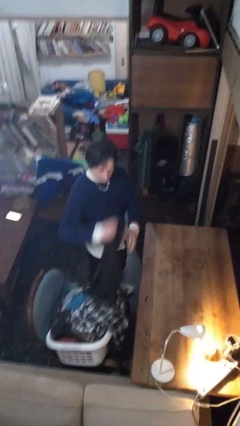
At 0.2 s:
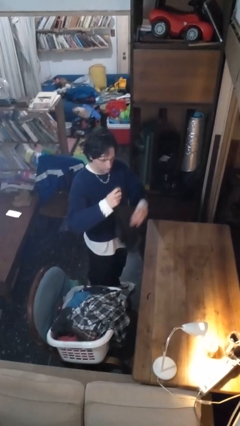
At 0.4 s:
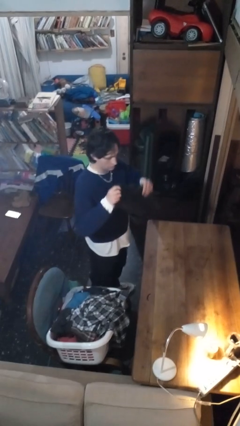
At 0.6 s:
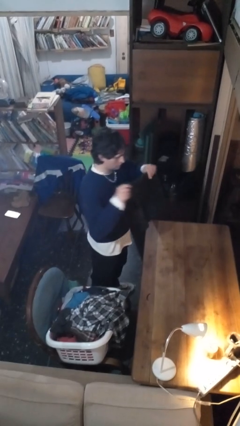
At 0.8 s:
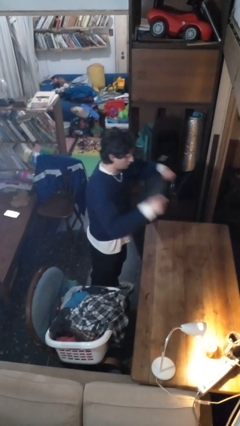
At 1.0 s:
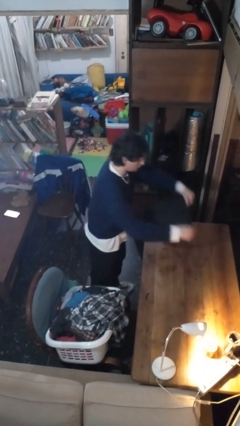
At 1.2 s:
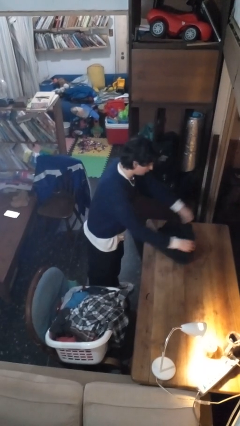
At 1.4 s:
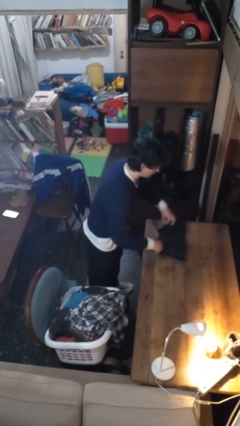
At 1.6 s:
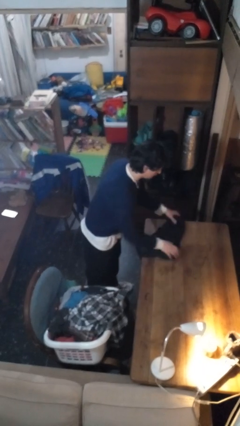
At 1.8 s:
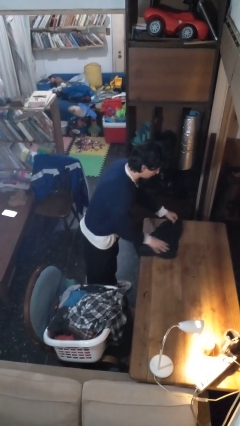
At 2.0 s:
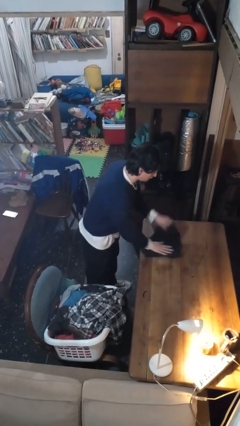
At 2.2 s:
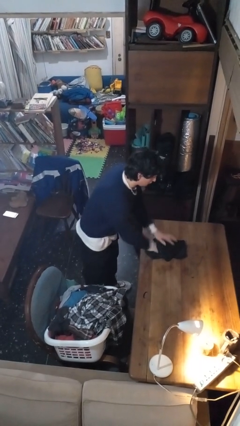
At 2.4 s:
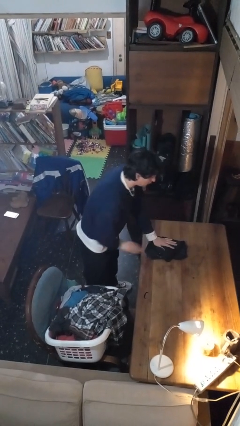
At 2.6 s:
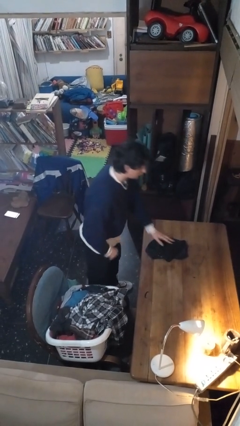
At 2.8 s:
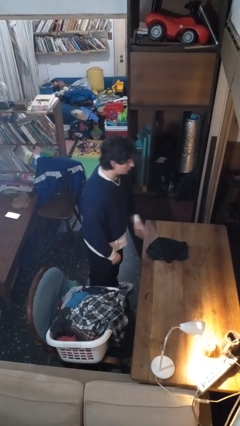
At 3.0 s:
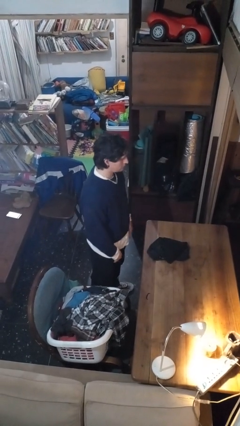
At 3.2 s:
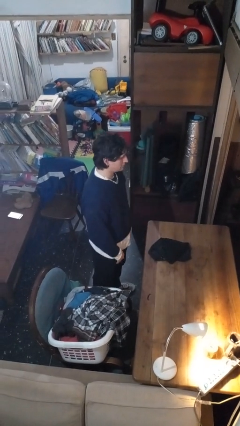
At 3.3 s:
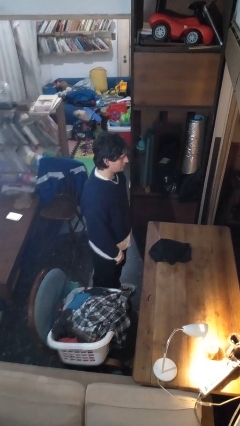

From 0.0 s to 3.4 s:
person folds shirt

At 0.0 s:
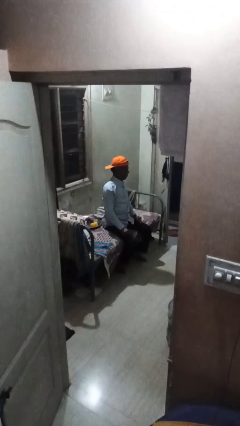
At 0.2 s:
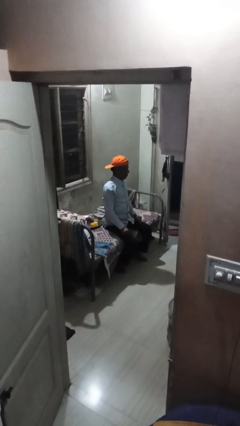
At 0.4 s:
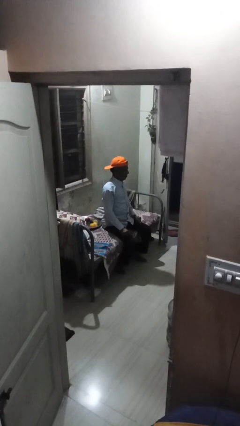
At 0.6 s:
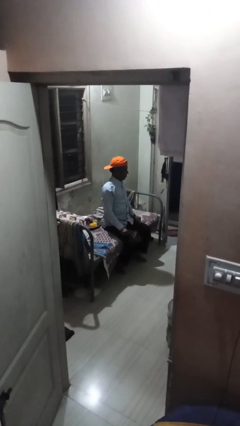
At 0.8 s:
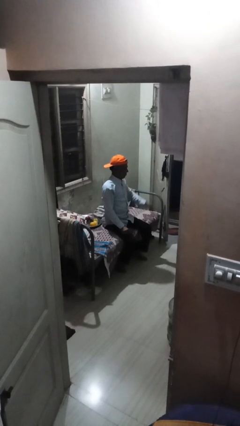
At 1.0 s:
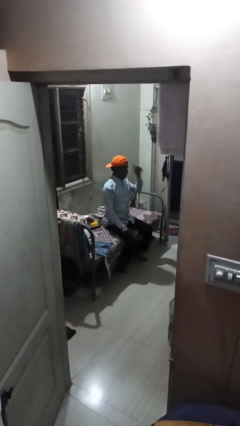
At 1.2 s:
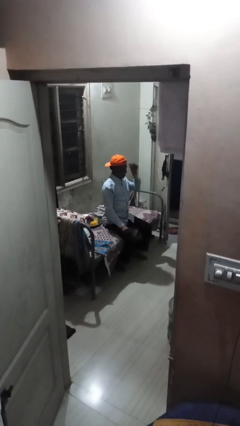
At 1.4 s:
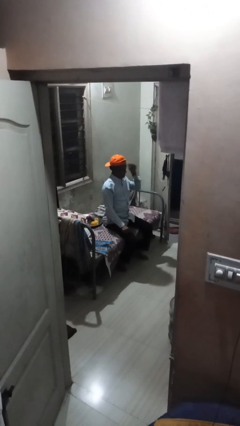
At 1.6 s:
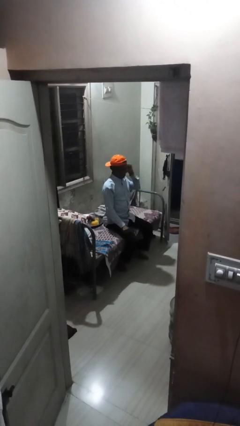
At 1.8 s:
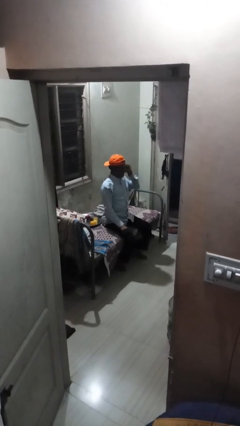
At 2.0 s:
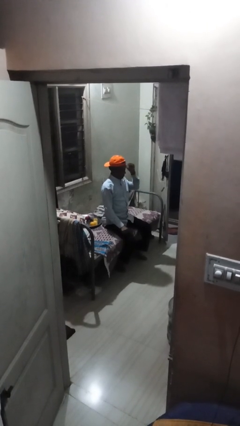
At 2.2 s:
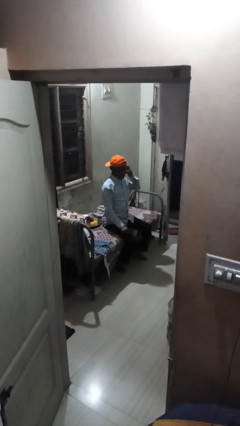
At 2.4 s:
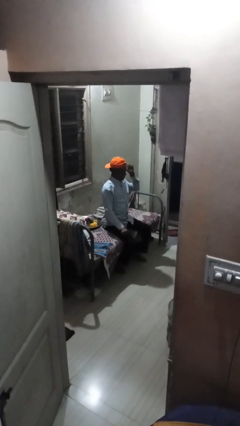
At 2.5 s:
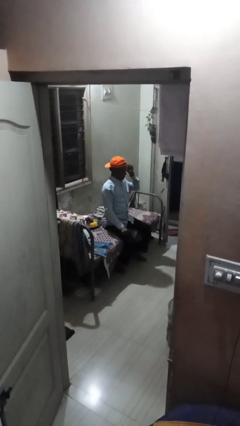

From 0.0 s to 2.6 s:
person gestures behind me

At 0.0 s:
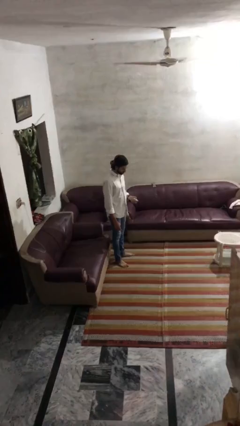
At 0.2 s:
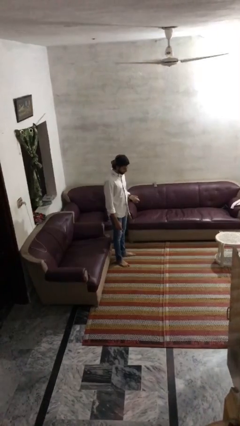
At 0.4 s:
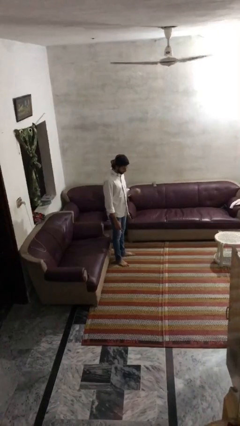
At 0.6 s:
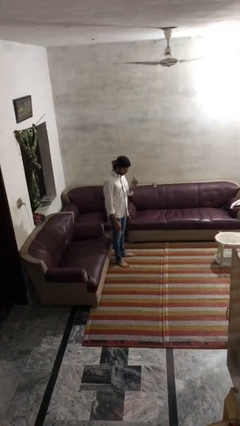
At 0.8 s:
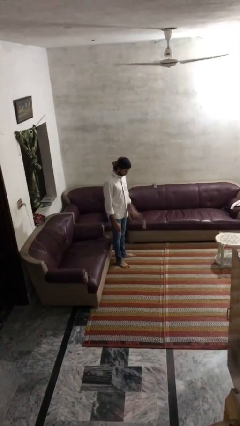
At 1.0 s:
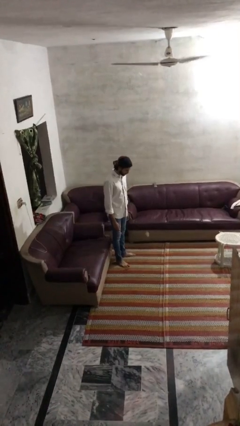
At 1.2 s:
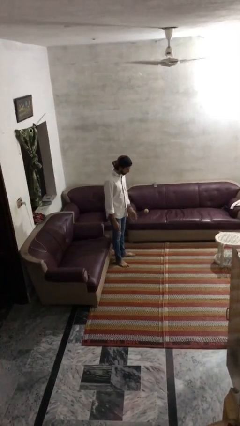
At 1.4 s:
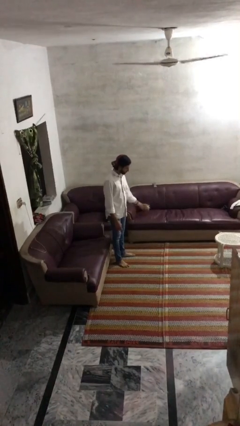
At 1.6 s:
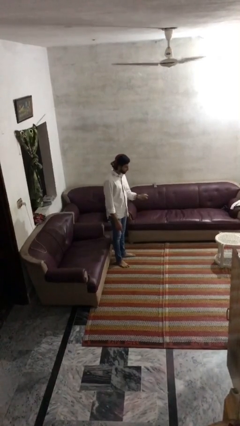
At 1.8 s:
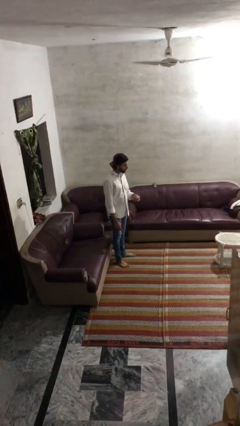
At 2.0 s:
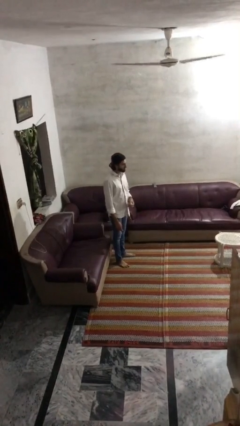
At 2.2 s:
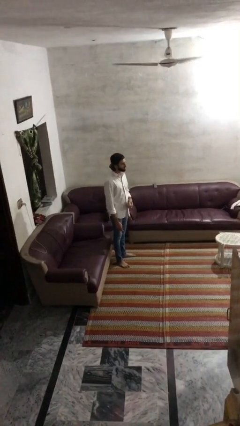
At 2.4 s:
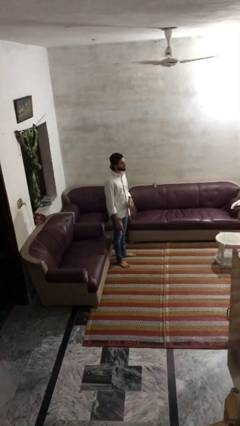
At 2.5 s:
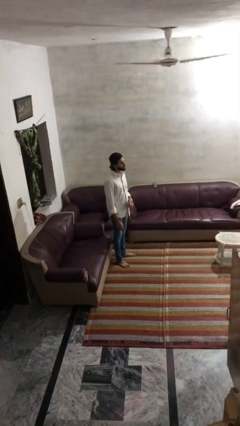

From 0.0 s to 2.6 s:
person bounces ball on floor

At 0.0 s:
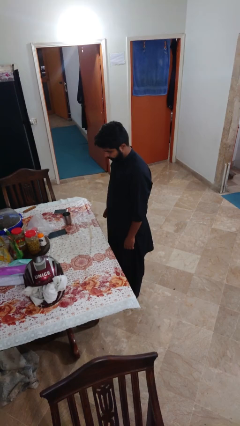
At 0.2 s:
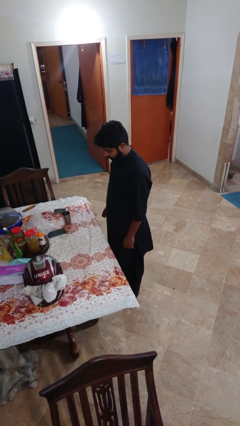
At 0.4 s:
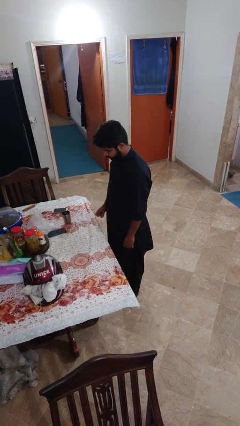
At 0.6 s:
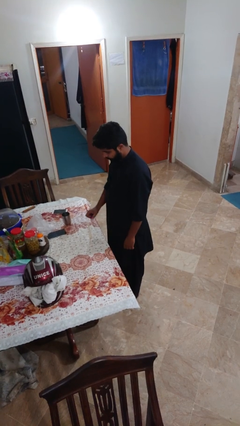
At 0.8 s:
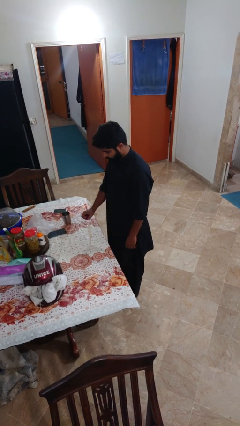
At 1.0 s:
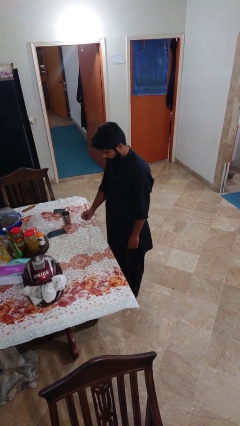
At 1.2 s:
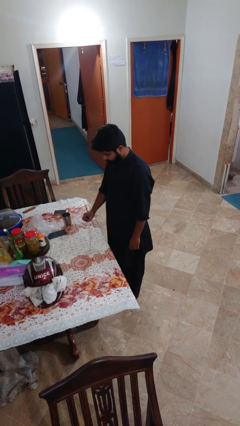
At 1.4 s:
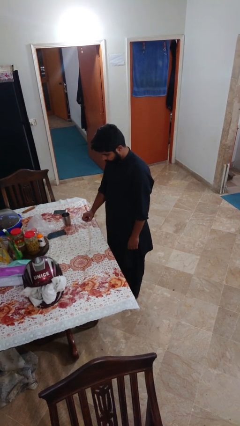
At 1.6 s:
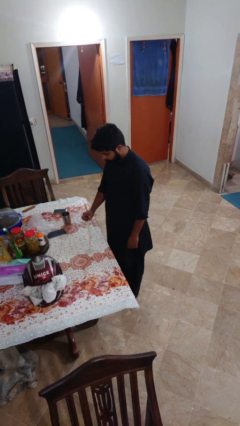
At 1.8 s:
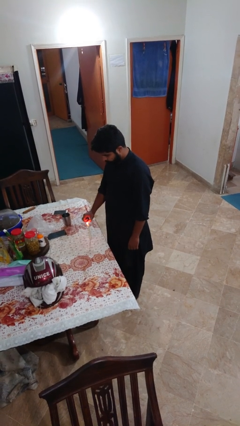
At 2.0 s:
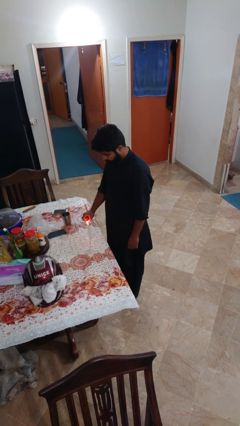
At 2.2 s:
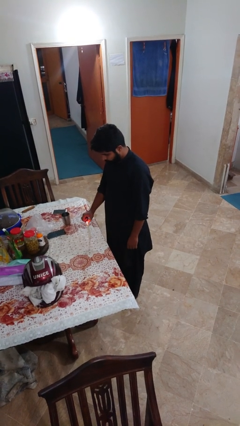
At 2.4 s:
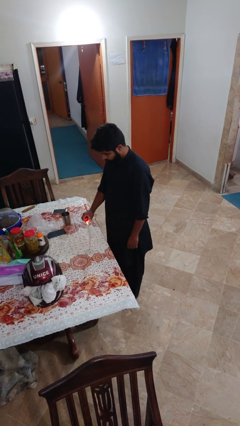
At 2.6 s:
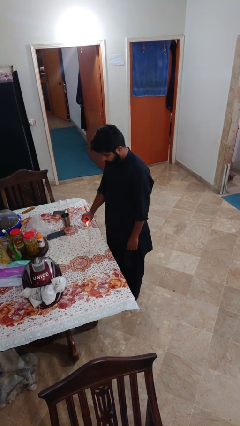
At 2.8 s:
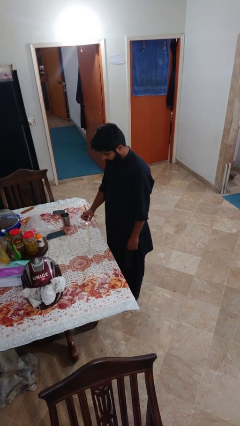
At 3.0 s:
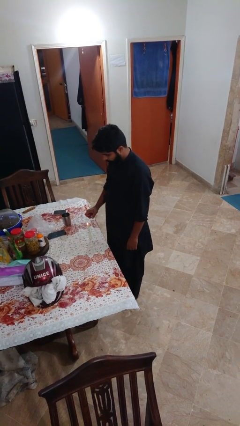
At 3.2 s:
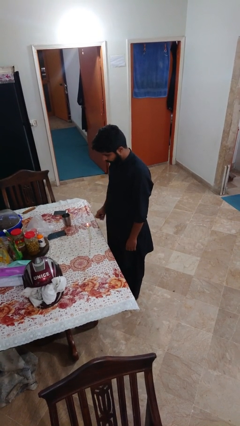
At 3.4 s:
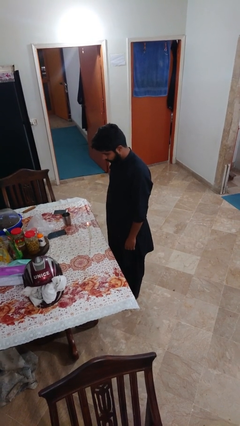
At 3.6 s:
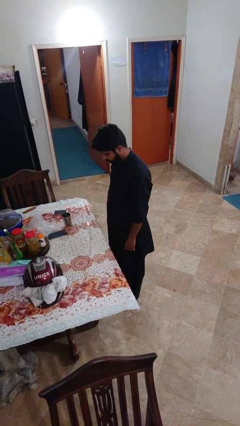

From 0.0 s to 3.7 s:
person lights candle

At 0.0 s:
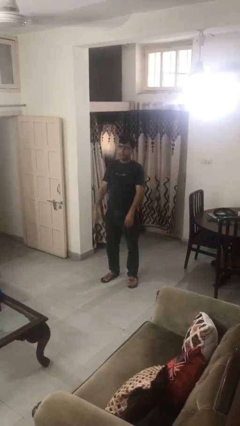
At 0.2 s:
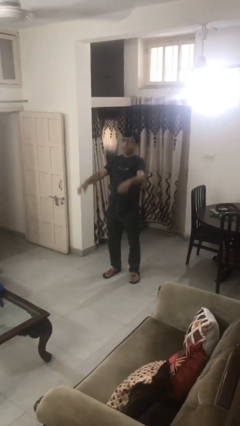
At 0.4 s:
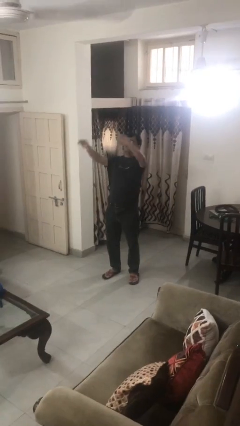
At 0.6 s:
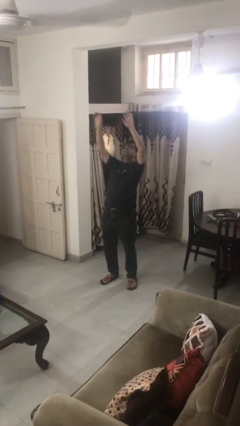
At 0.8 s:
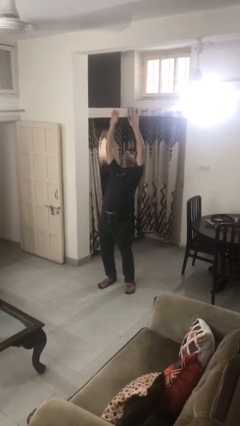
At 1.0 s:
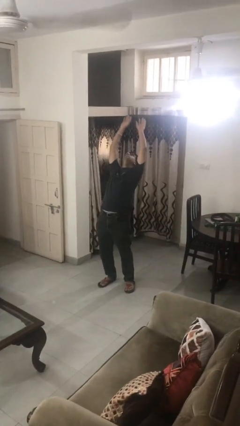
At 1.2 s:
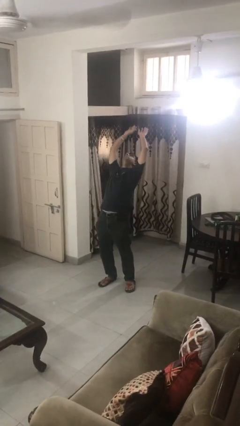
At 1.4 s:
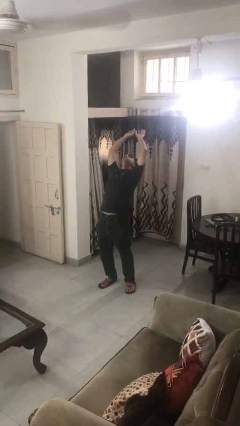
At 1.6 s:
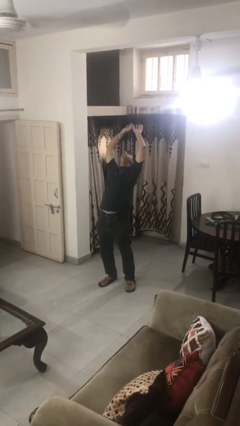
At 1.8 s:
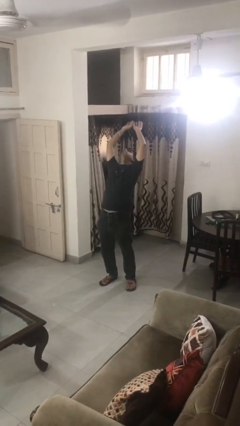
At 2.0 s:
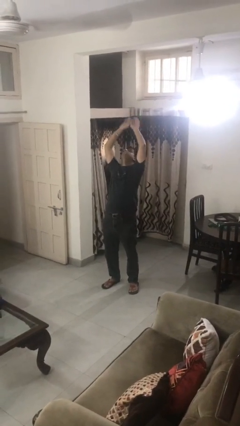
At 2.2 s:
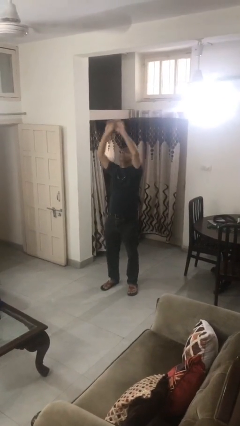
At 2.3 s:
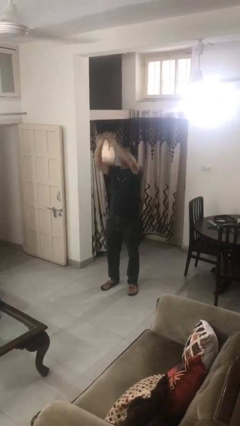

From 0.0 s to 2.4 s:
person stretches back

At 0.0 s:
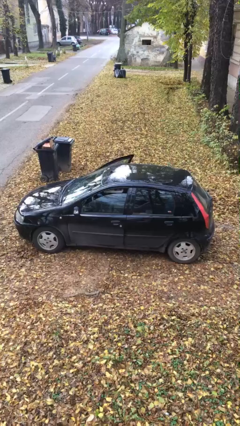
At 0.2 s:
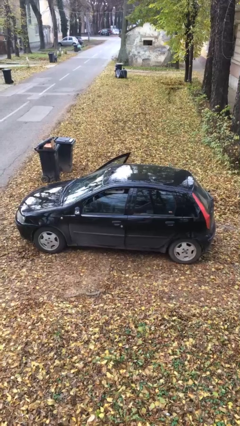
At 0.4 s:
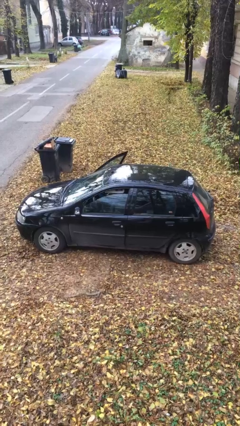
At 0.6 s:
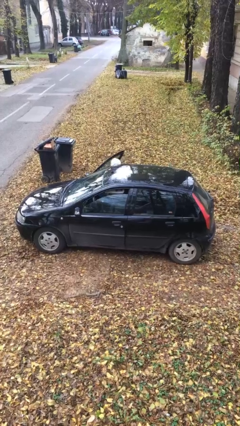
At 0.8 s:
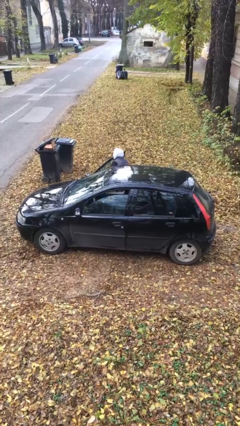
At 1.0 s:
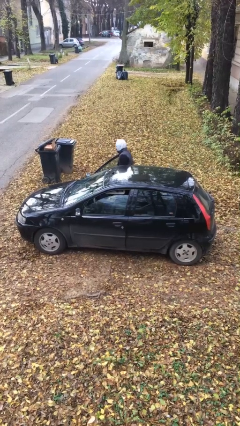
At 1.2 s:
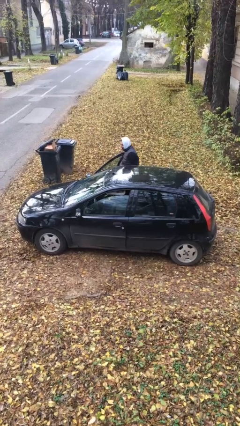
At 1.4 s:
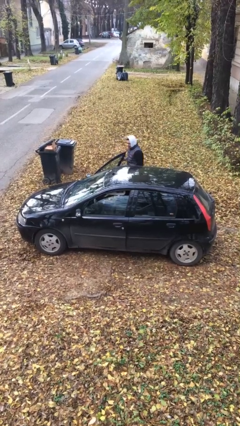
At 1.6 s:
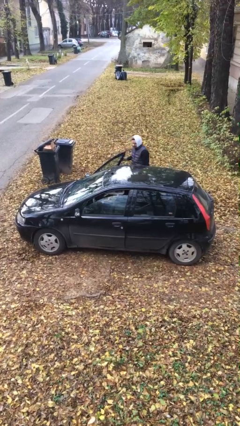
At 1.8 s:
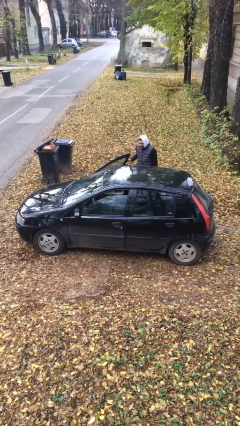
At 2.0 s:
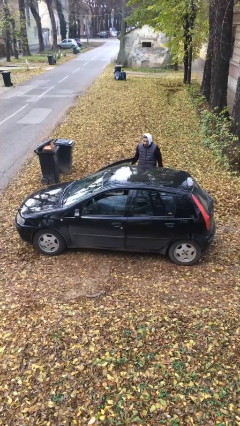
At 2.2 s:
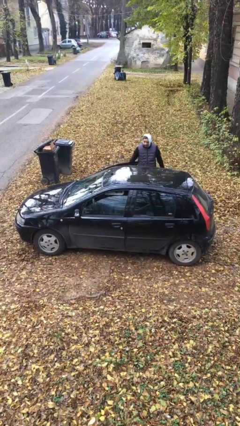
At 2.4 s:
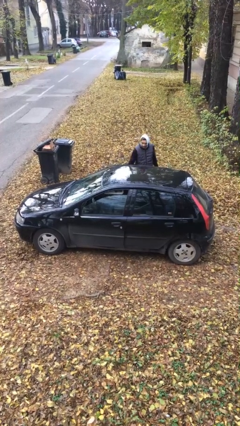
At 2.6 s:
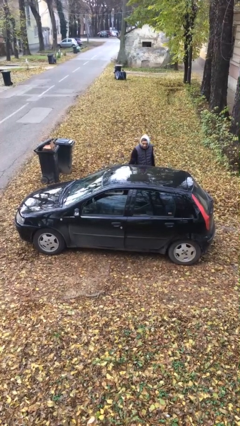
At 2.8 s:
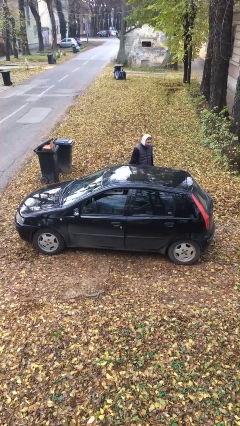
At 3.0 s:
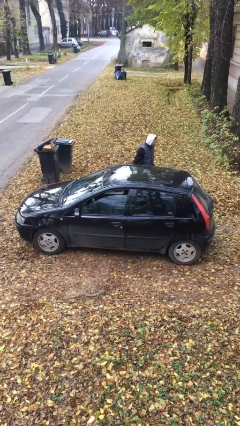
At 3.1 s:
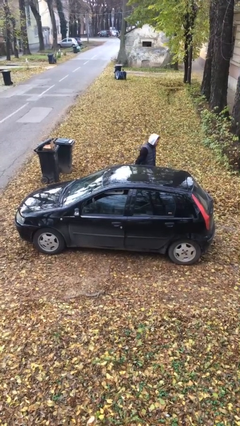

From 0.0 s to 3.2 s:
car drops off person
